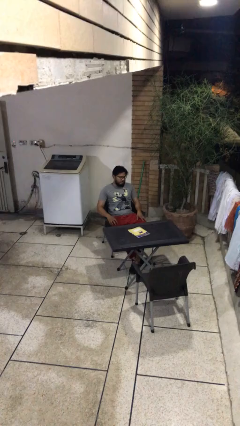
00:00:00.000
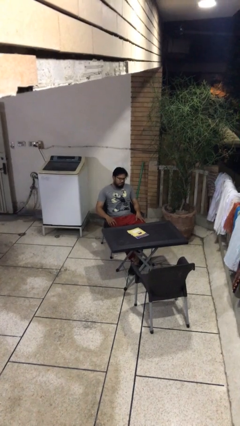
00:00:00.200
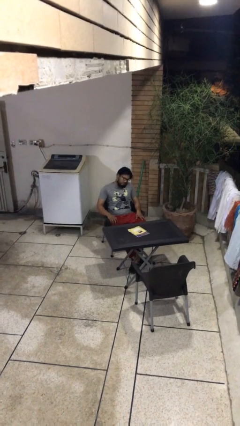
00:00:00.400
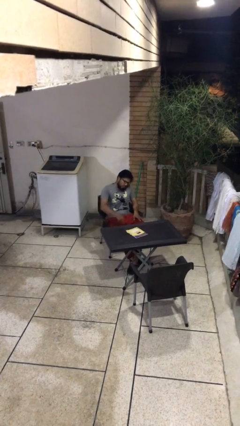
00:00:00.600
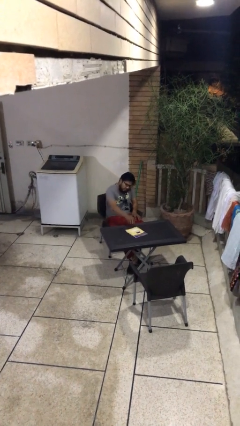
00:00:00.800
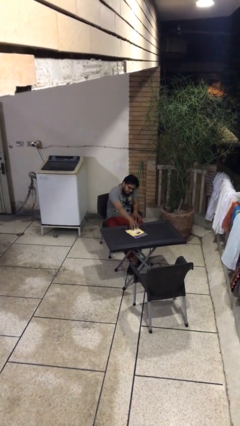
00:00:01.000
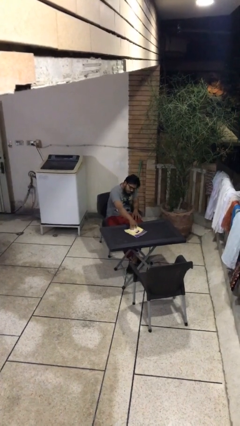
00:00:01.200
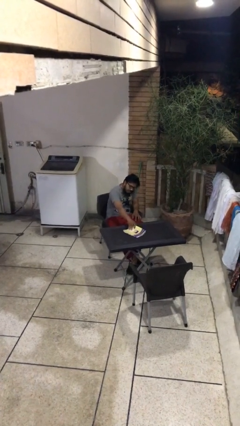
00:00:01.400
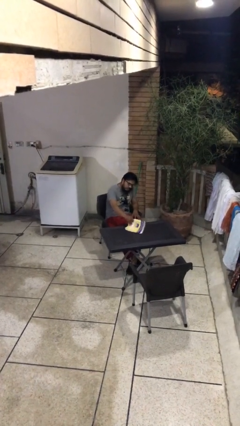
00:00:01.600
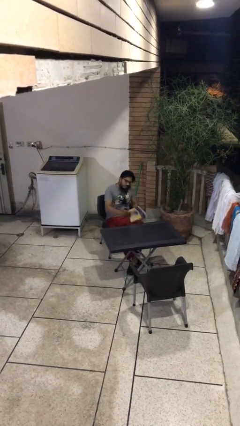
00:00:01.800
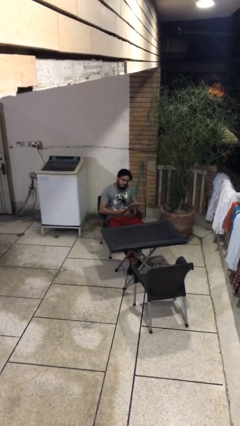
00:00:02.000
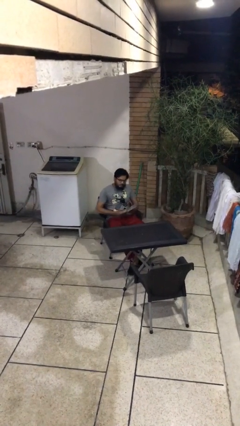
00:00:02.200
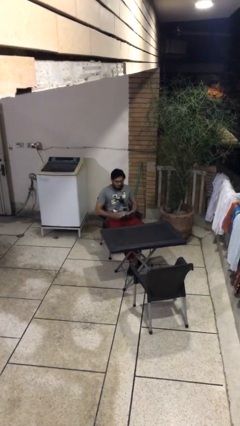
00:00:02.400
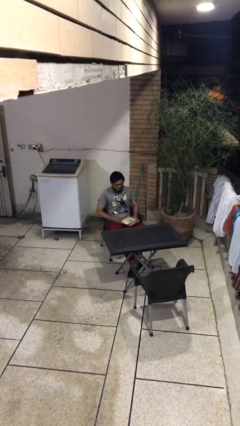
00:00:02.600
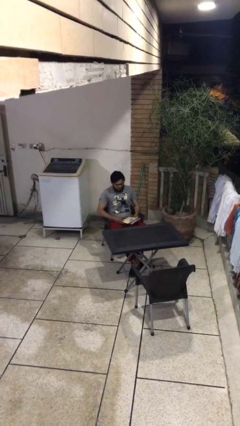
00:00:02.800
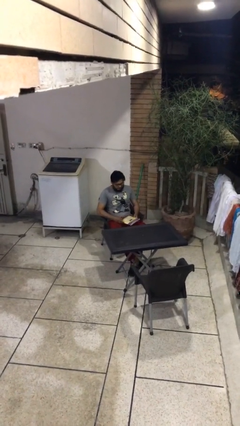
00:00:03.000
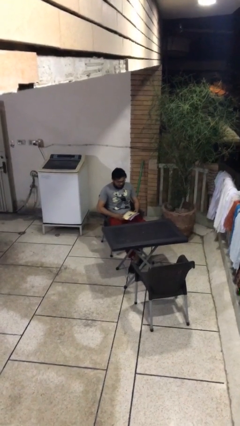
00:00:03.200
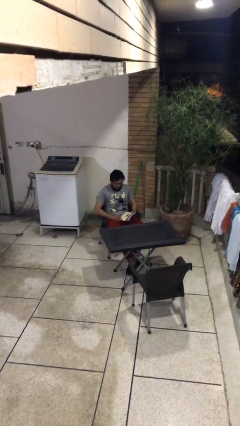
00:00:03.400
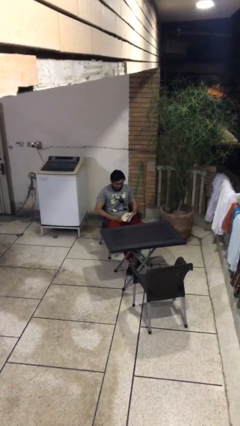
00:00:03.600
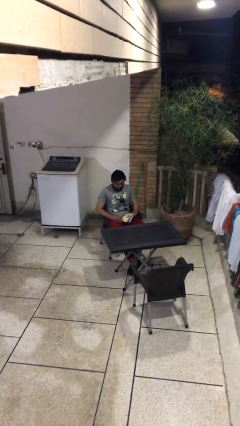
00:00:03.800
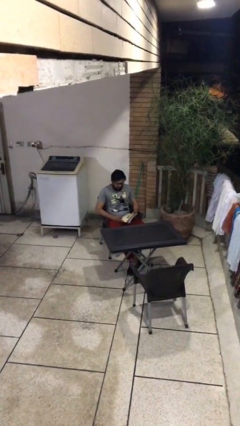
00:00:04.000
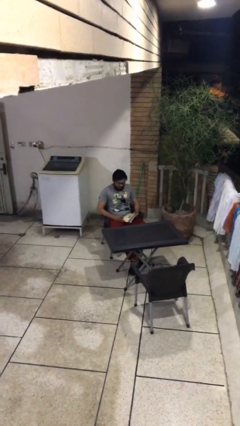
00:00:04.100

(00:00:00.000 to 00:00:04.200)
person picks up object from table

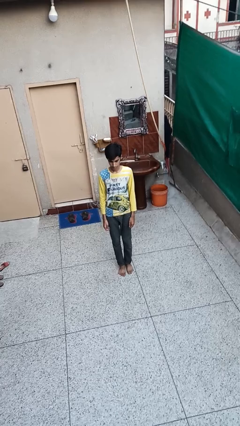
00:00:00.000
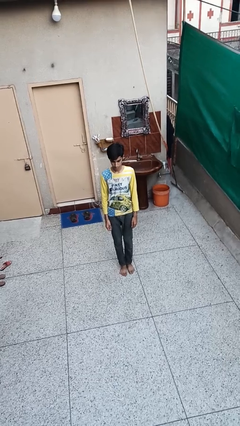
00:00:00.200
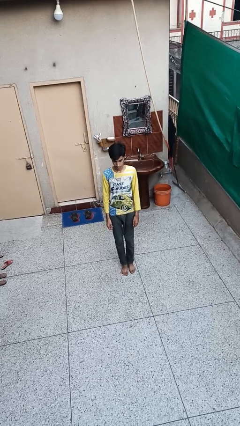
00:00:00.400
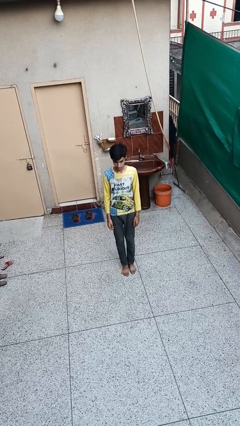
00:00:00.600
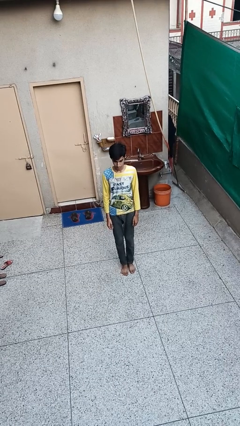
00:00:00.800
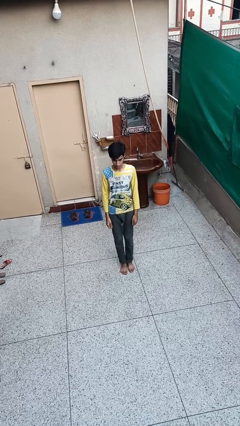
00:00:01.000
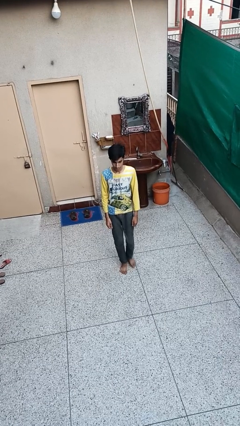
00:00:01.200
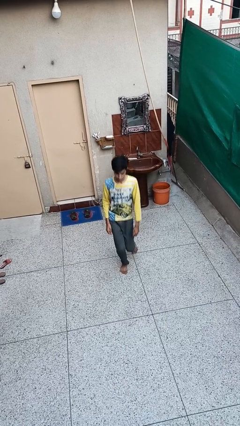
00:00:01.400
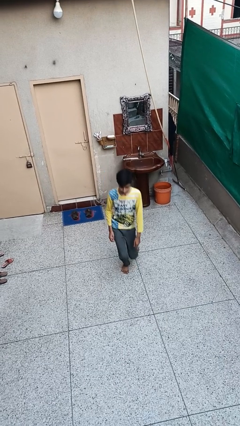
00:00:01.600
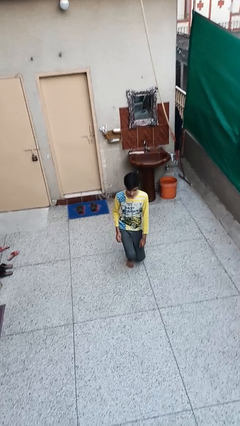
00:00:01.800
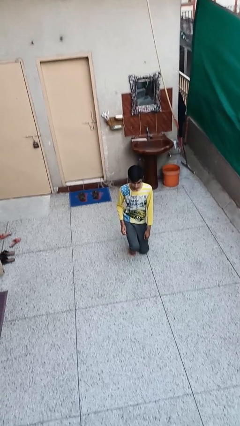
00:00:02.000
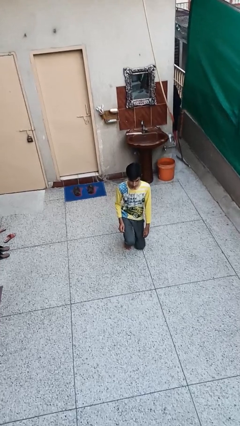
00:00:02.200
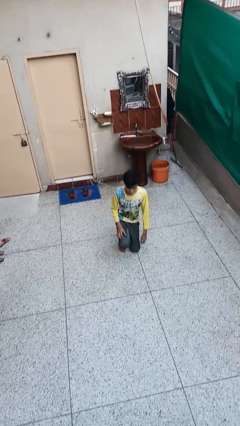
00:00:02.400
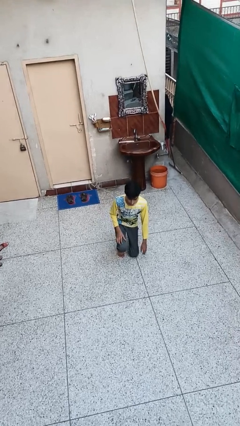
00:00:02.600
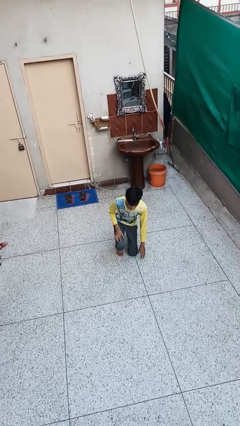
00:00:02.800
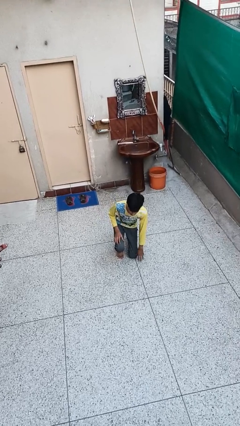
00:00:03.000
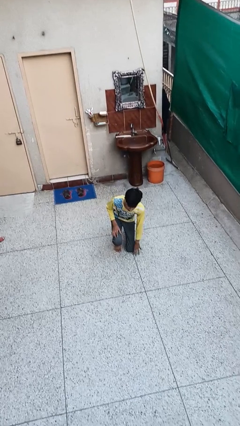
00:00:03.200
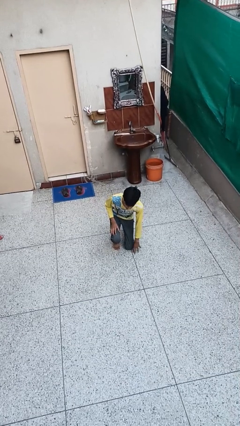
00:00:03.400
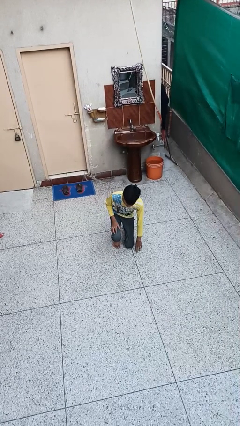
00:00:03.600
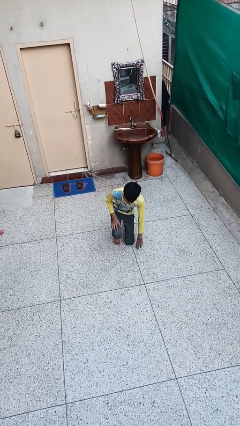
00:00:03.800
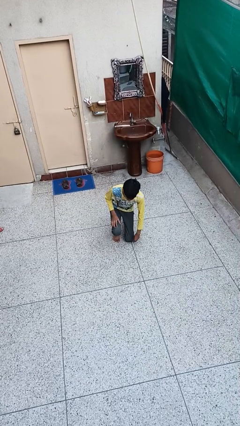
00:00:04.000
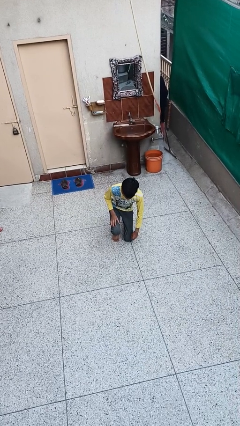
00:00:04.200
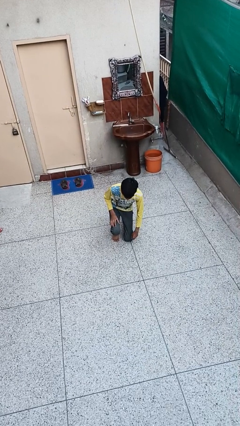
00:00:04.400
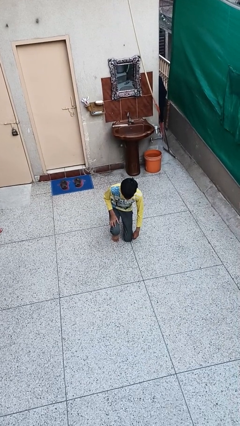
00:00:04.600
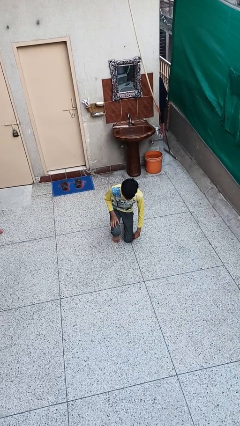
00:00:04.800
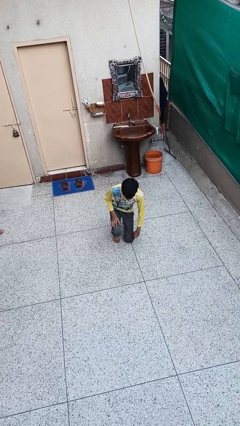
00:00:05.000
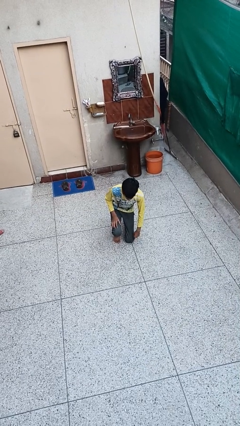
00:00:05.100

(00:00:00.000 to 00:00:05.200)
person kneels

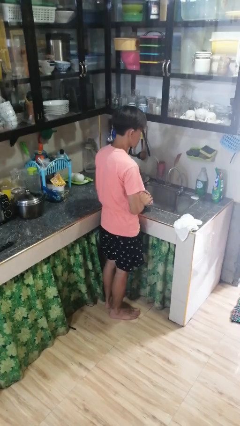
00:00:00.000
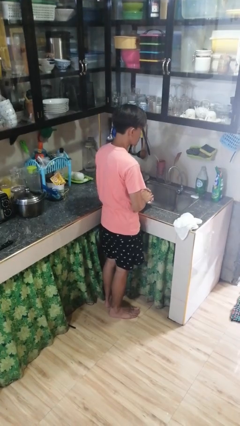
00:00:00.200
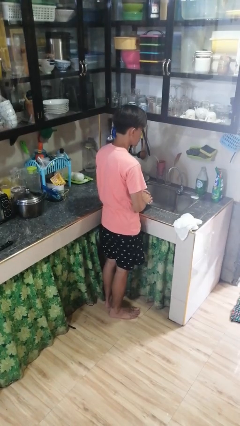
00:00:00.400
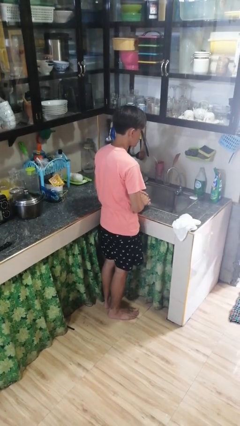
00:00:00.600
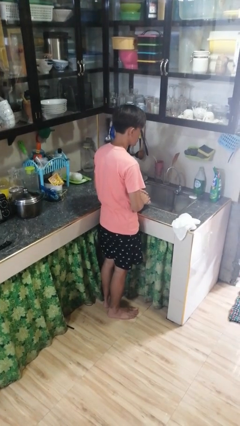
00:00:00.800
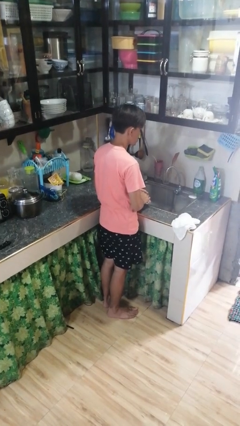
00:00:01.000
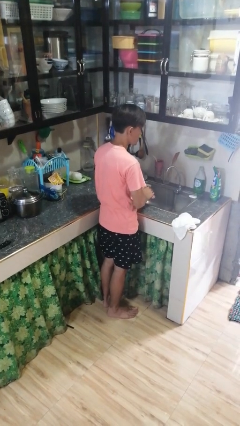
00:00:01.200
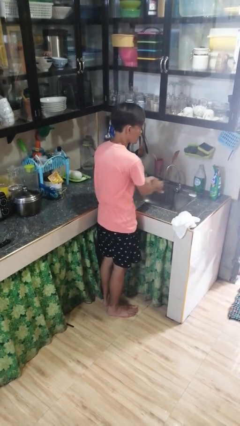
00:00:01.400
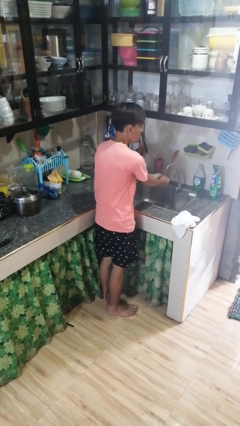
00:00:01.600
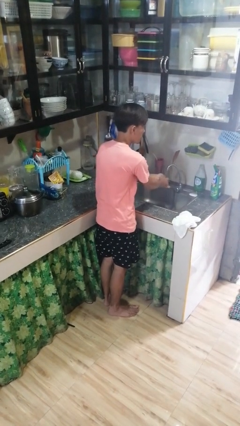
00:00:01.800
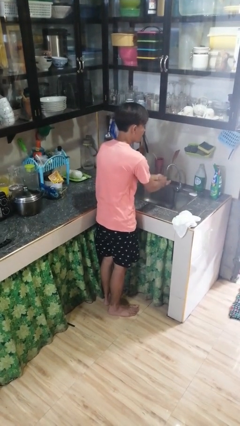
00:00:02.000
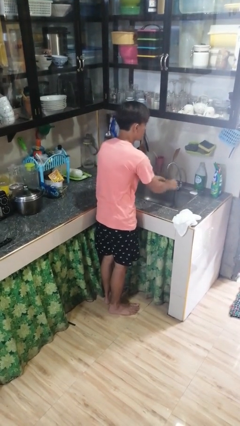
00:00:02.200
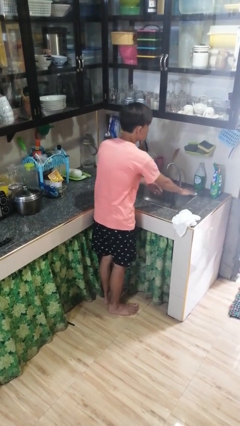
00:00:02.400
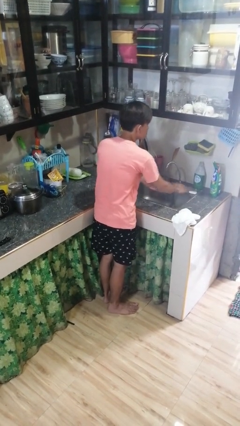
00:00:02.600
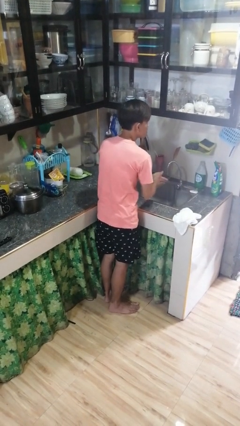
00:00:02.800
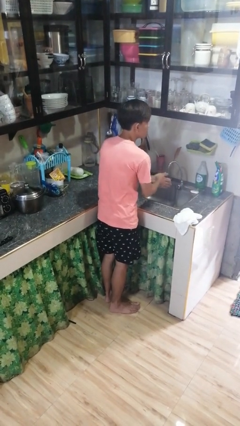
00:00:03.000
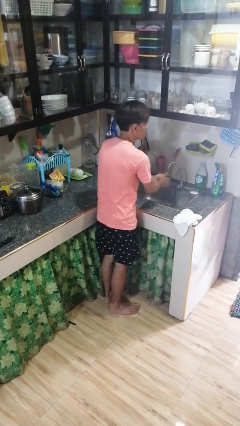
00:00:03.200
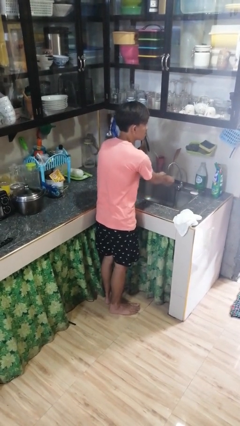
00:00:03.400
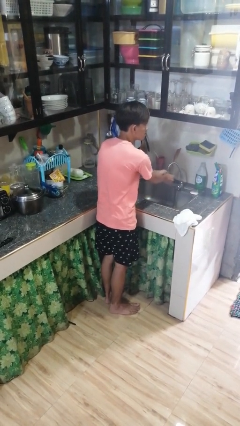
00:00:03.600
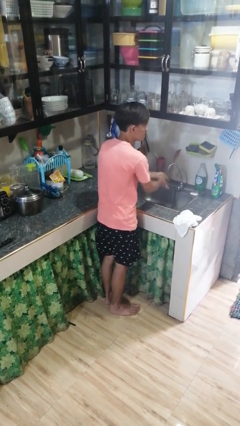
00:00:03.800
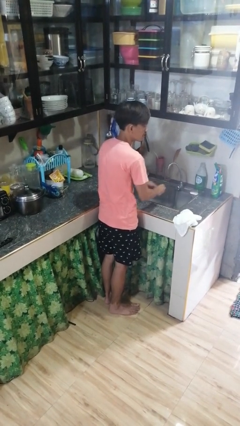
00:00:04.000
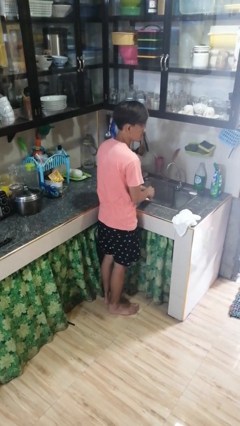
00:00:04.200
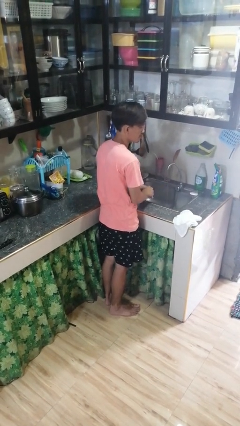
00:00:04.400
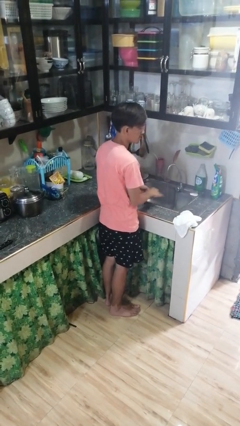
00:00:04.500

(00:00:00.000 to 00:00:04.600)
person washes hands

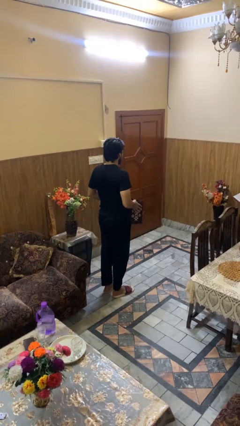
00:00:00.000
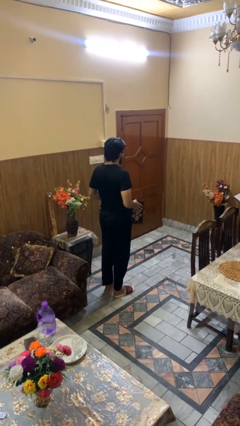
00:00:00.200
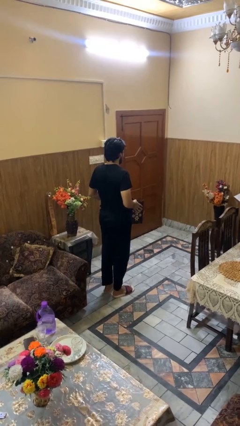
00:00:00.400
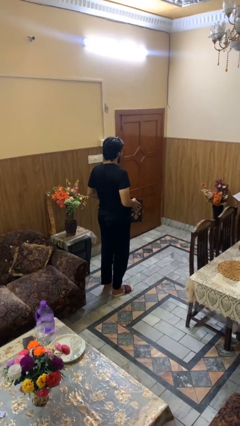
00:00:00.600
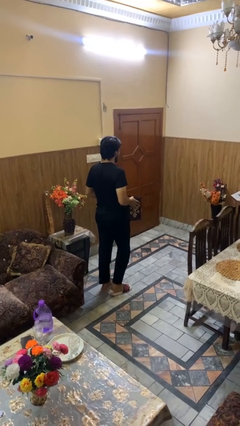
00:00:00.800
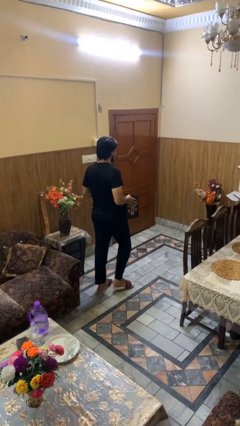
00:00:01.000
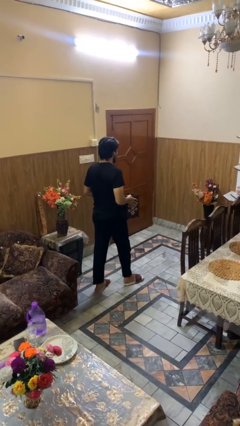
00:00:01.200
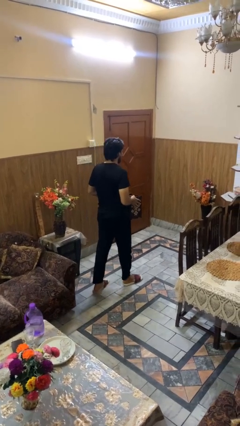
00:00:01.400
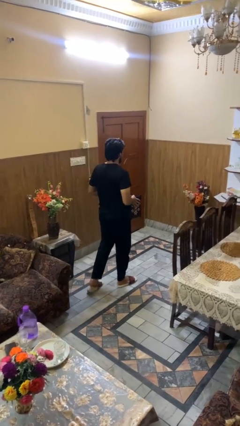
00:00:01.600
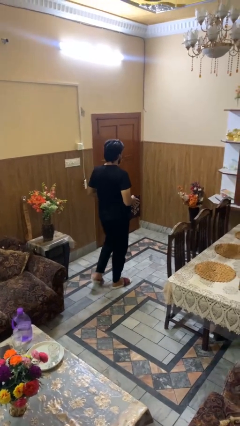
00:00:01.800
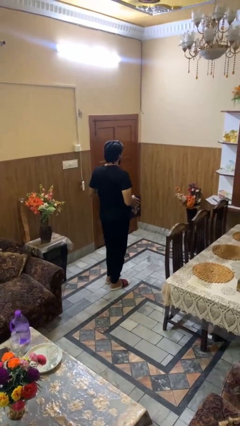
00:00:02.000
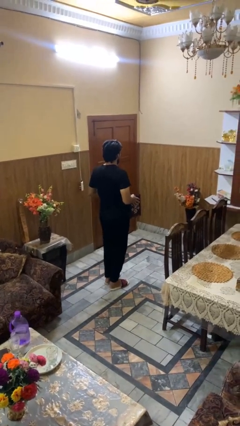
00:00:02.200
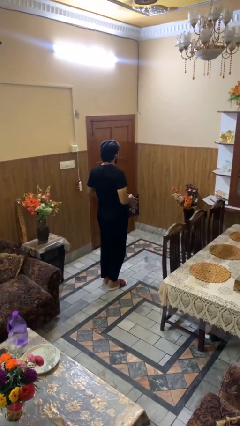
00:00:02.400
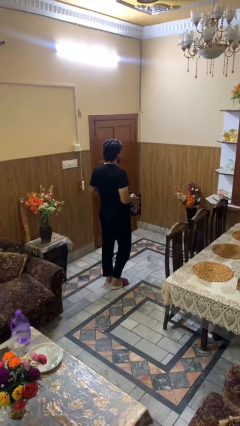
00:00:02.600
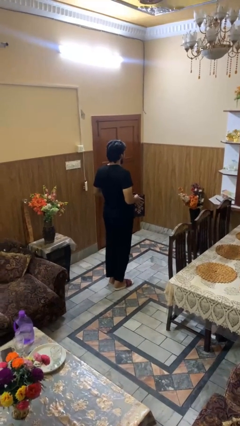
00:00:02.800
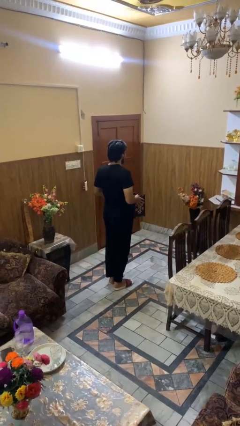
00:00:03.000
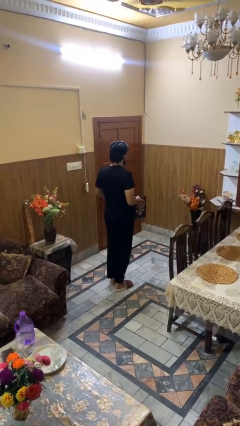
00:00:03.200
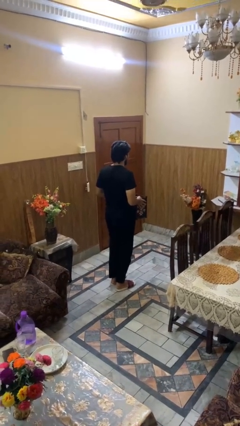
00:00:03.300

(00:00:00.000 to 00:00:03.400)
person carries groceries

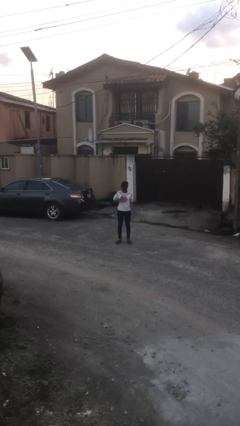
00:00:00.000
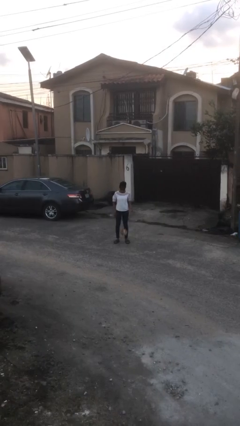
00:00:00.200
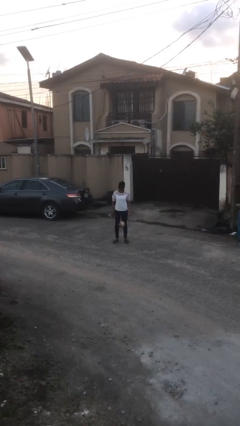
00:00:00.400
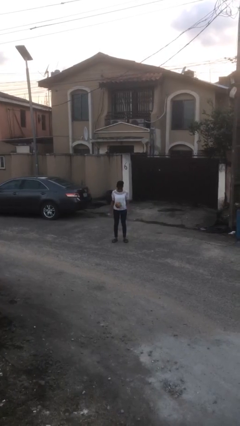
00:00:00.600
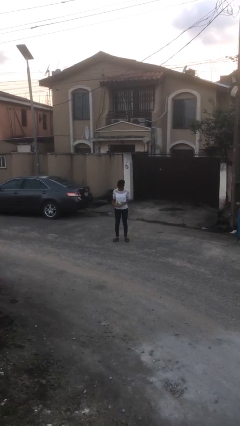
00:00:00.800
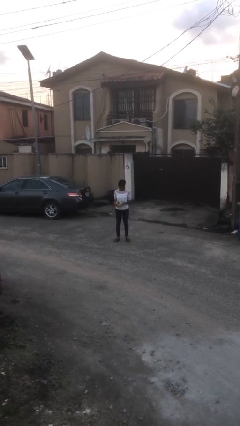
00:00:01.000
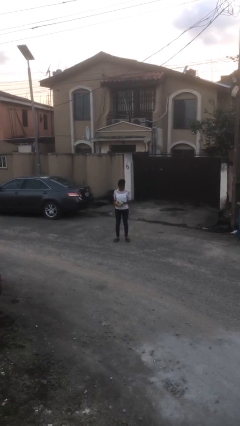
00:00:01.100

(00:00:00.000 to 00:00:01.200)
person bounces ball on floor
